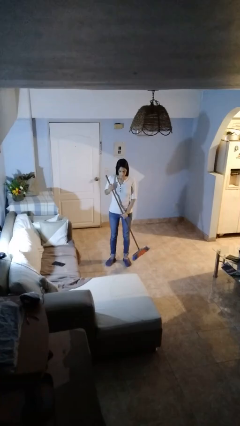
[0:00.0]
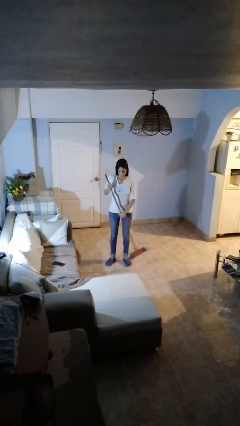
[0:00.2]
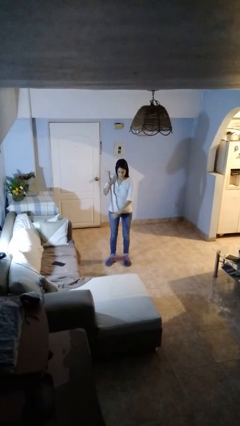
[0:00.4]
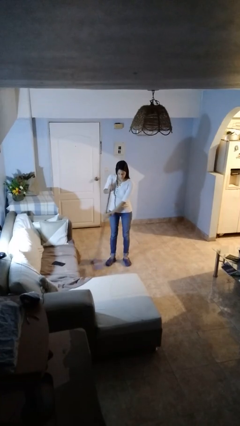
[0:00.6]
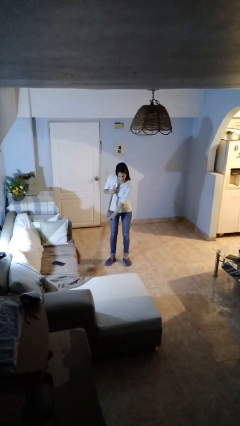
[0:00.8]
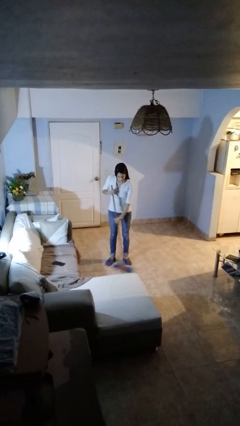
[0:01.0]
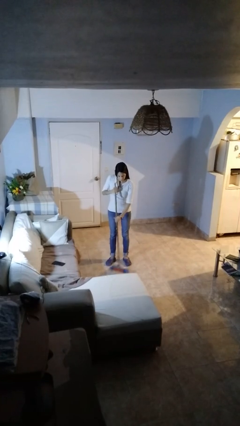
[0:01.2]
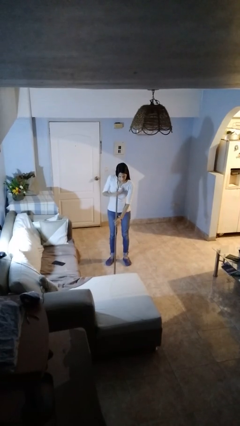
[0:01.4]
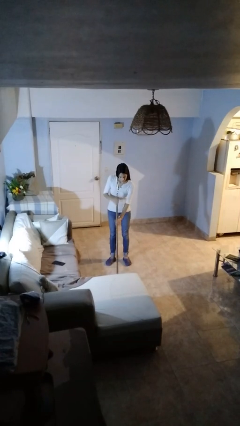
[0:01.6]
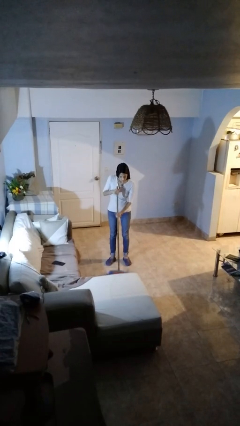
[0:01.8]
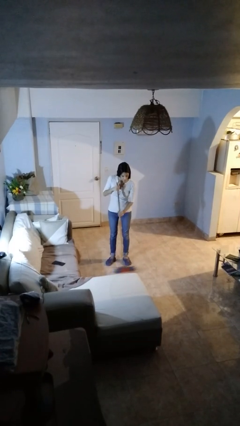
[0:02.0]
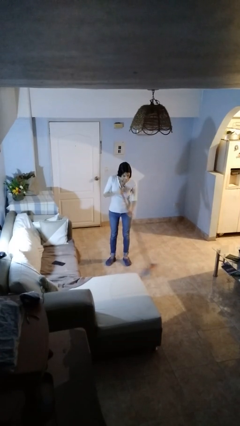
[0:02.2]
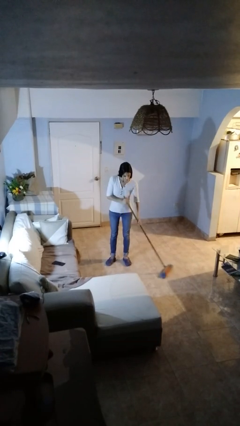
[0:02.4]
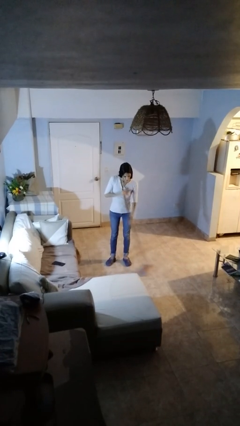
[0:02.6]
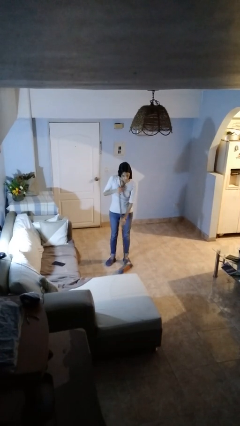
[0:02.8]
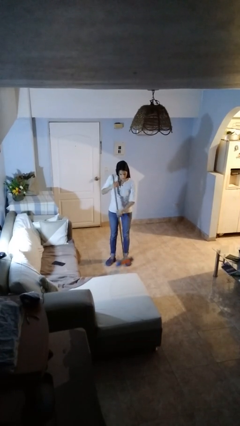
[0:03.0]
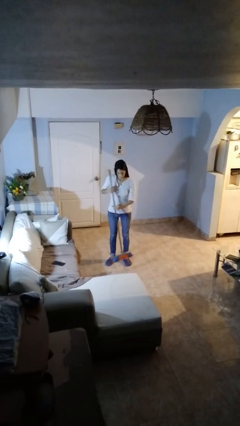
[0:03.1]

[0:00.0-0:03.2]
person sweeps floor

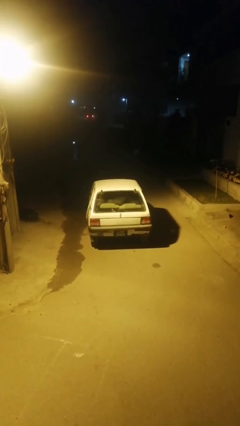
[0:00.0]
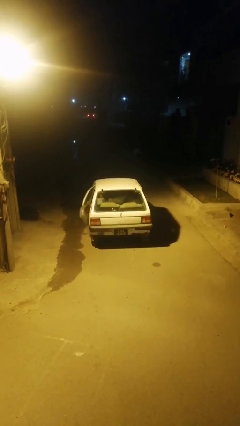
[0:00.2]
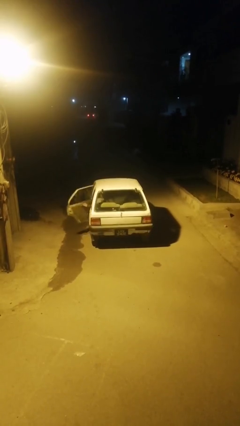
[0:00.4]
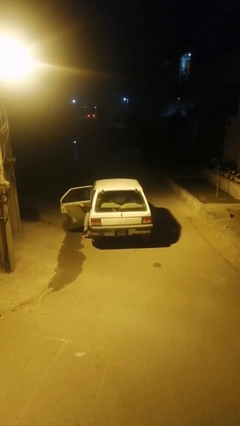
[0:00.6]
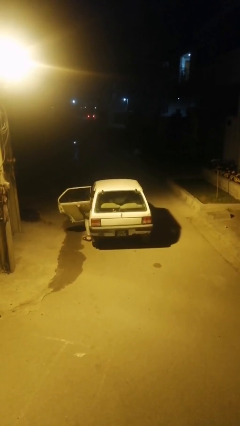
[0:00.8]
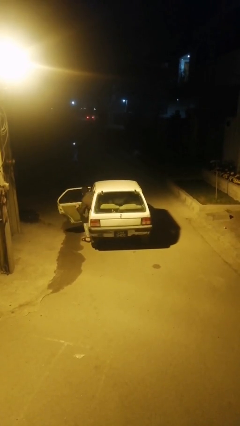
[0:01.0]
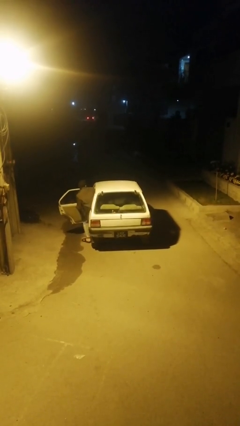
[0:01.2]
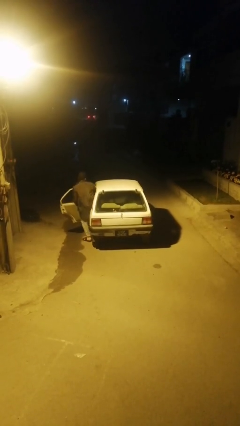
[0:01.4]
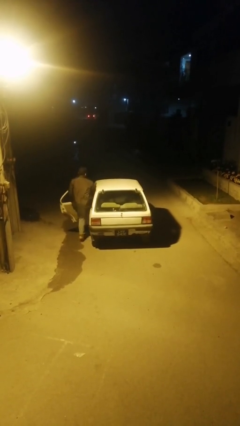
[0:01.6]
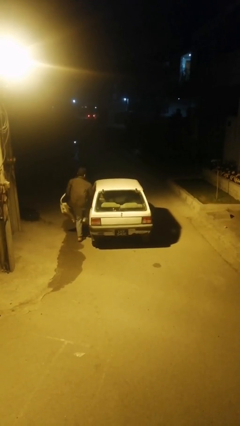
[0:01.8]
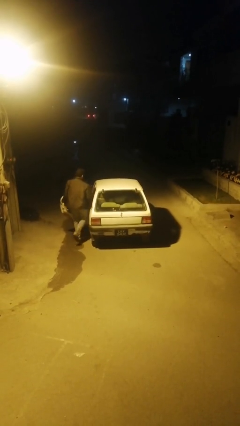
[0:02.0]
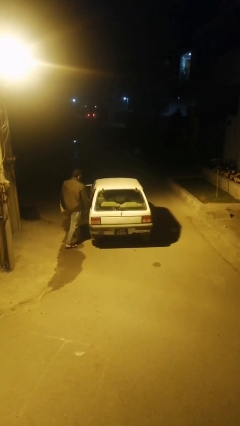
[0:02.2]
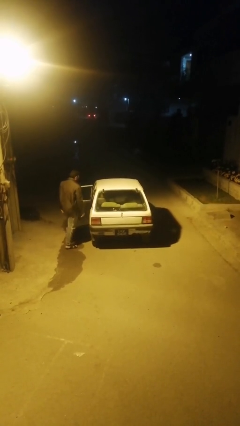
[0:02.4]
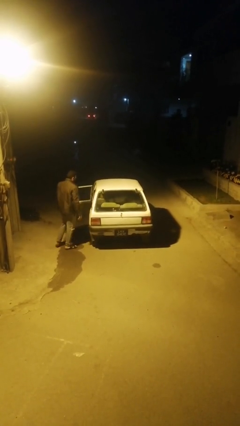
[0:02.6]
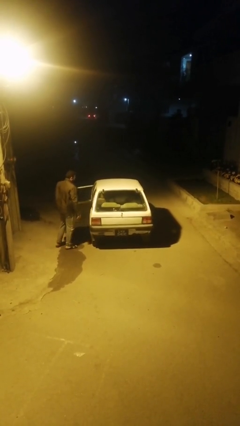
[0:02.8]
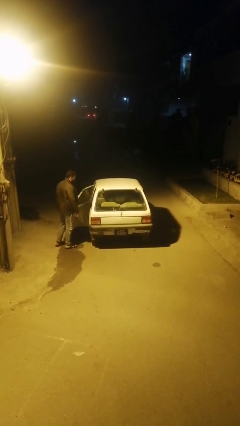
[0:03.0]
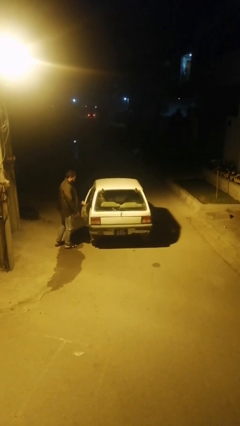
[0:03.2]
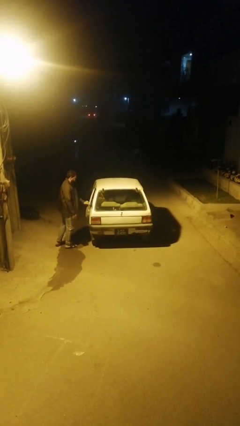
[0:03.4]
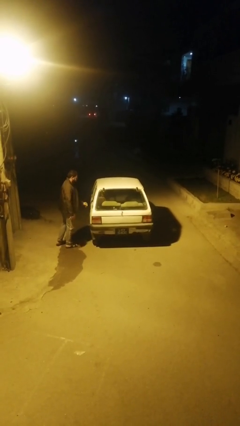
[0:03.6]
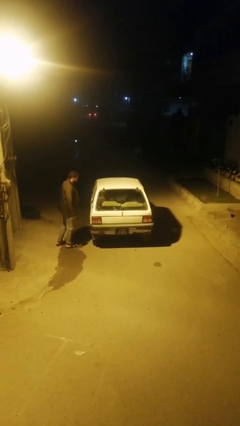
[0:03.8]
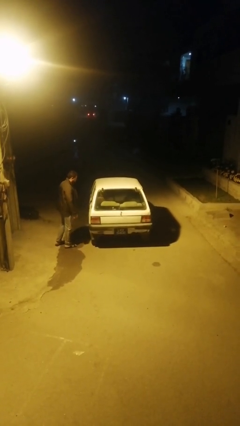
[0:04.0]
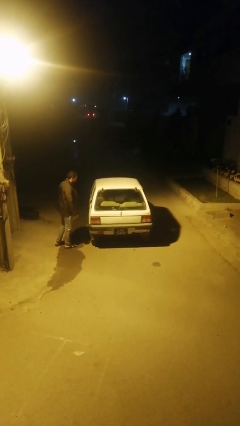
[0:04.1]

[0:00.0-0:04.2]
car drops off person

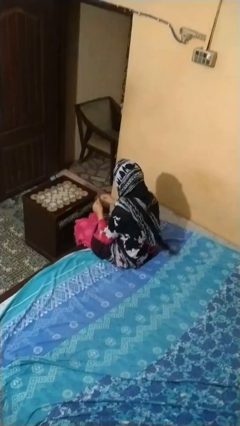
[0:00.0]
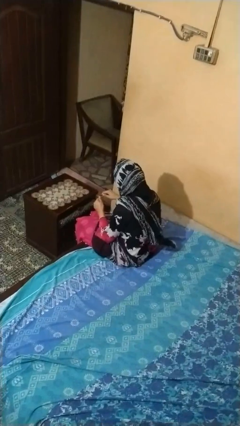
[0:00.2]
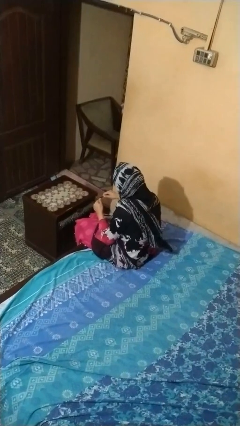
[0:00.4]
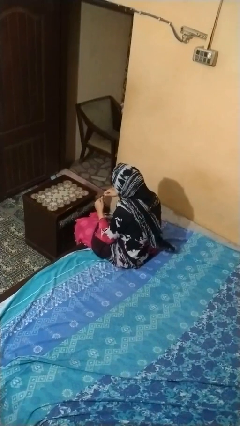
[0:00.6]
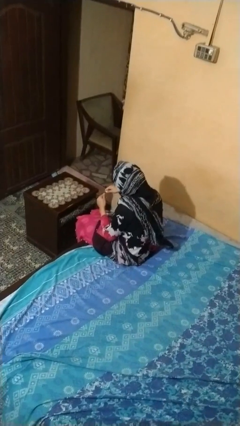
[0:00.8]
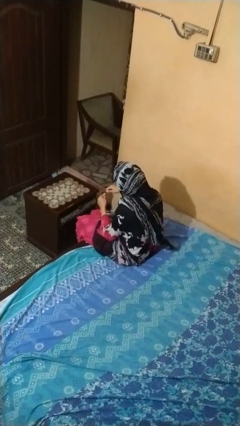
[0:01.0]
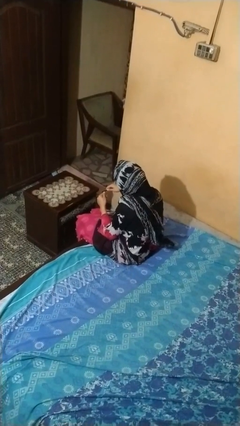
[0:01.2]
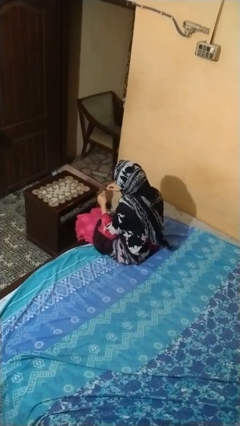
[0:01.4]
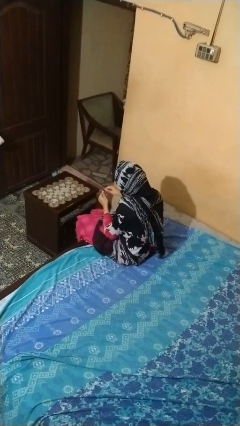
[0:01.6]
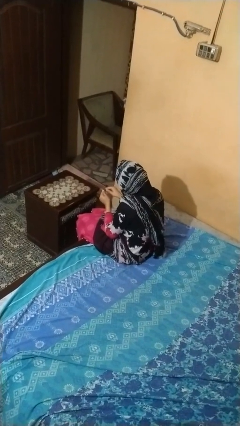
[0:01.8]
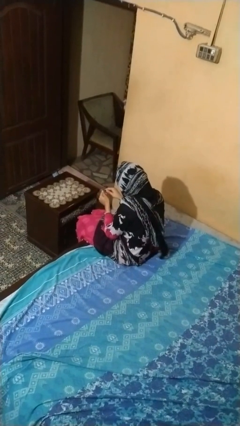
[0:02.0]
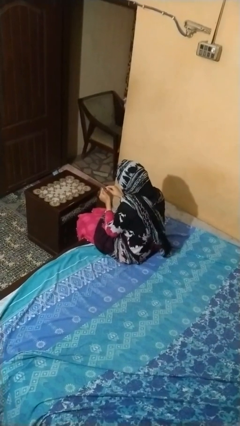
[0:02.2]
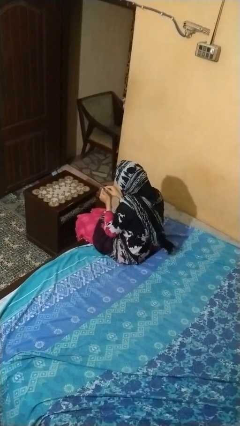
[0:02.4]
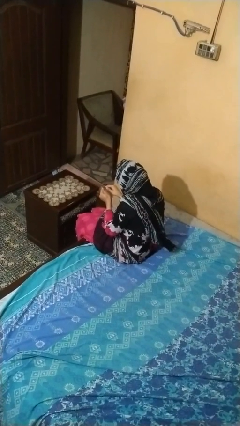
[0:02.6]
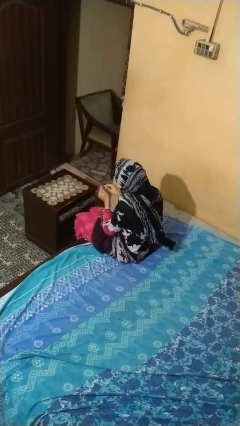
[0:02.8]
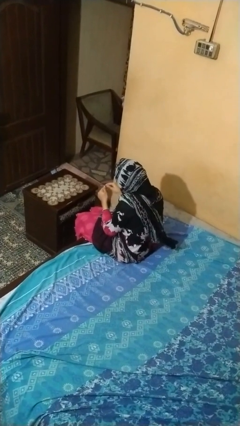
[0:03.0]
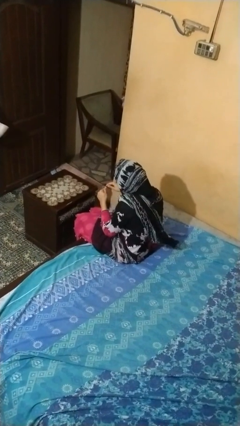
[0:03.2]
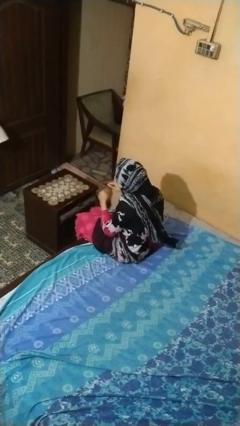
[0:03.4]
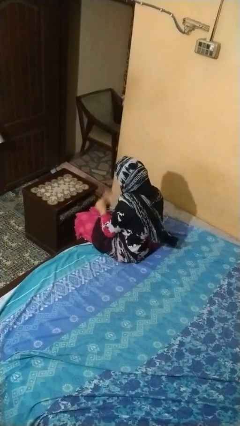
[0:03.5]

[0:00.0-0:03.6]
person files fingernails

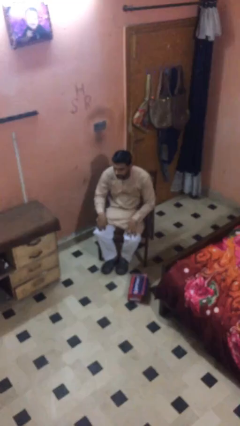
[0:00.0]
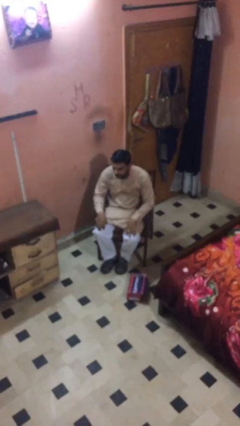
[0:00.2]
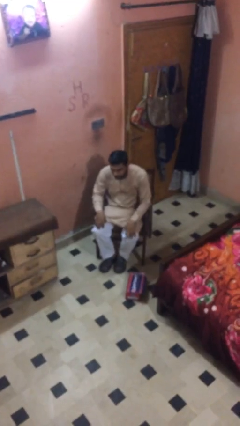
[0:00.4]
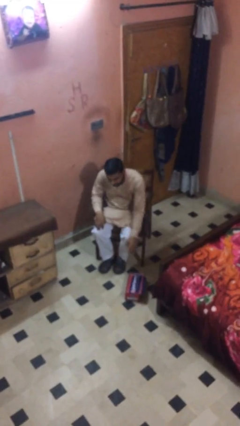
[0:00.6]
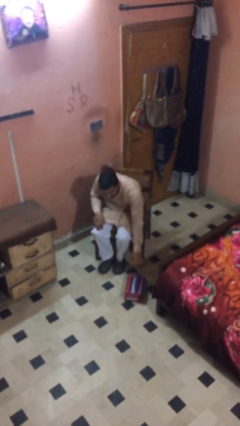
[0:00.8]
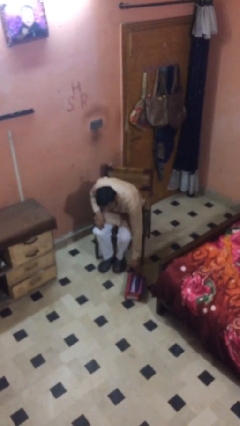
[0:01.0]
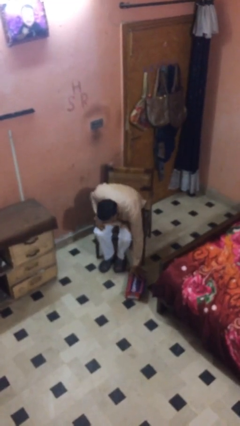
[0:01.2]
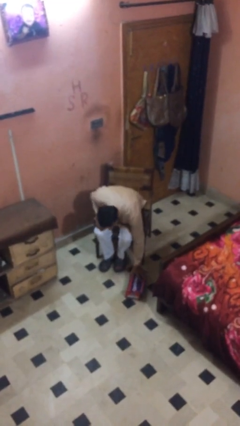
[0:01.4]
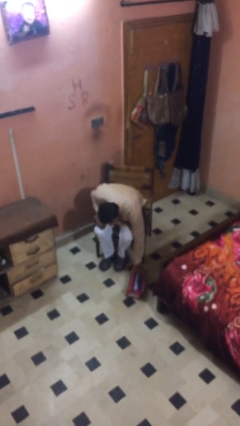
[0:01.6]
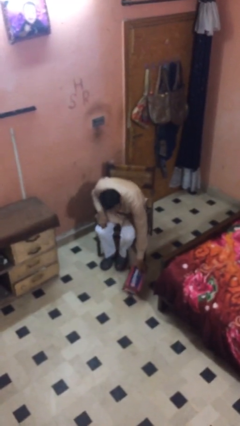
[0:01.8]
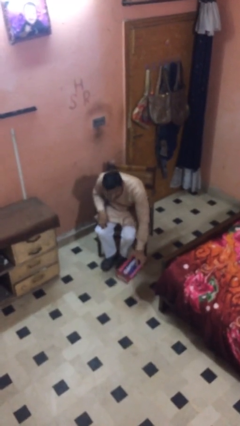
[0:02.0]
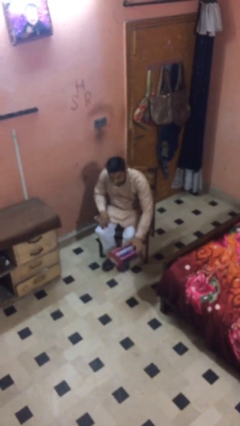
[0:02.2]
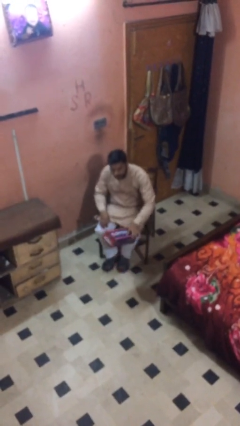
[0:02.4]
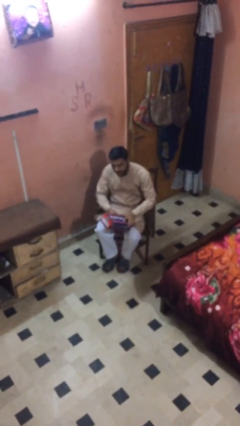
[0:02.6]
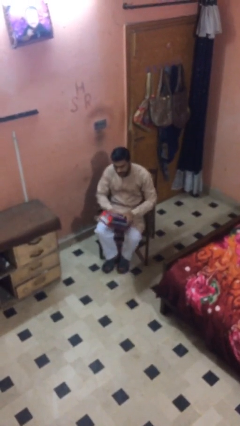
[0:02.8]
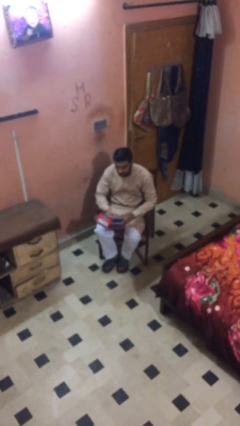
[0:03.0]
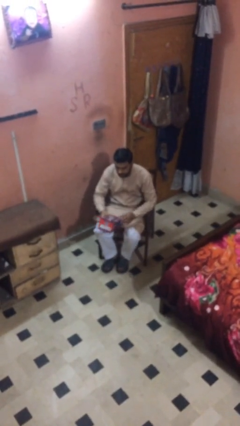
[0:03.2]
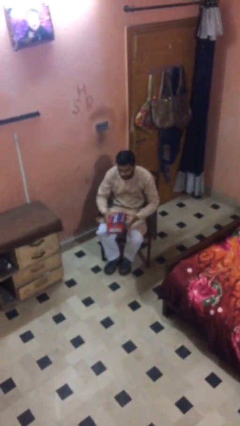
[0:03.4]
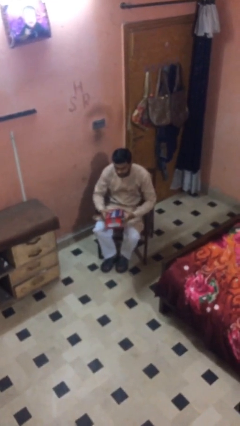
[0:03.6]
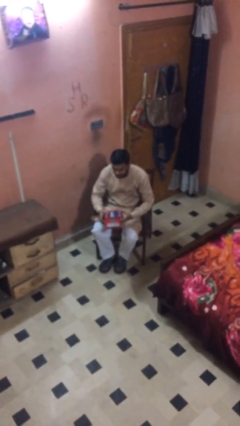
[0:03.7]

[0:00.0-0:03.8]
person picks up object from floor

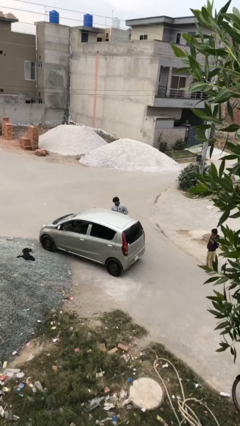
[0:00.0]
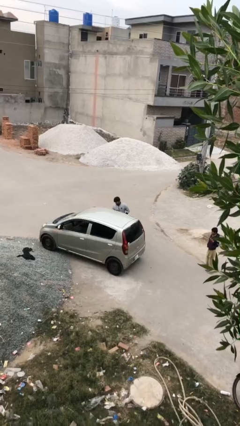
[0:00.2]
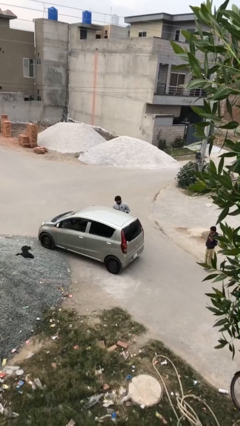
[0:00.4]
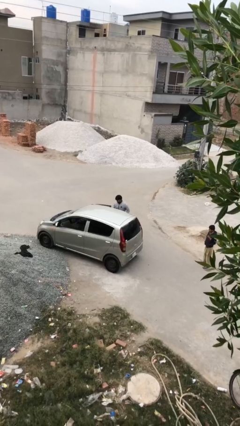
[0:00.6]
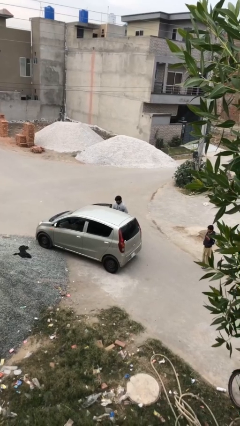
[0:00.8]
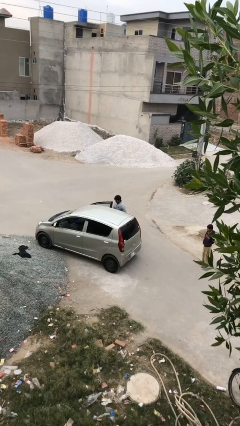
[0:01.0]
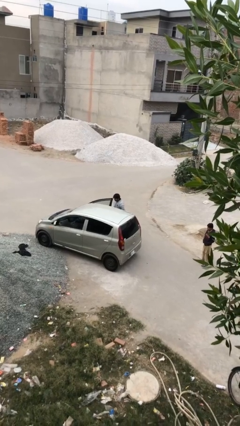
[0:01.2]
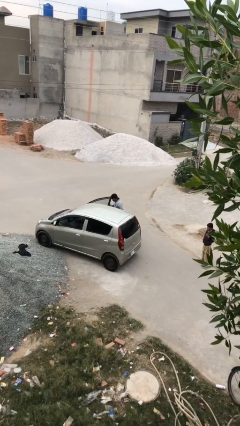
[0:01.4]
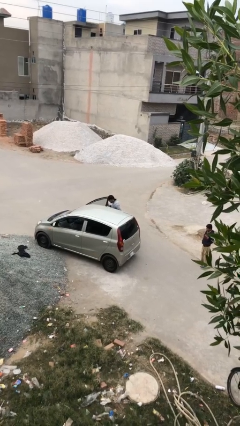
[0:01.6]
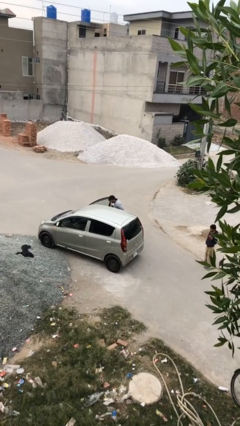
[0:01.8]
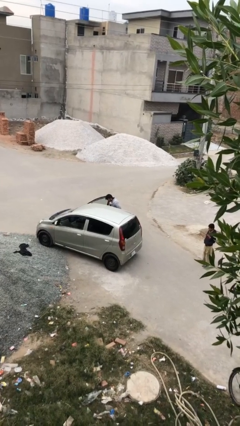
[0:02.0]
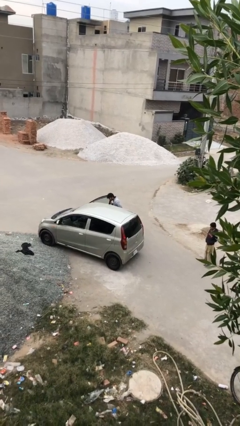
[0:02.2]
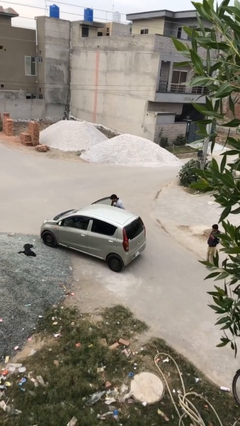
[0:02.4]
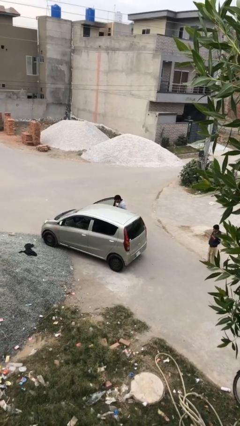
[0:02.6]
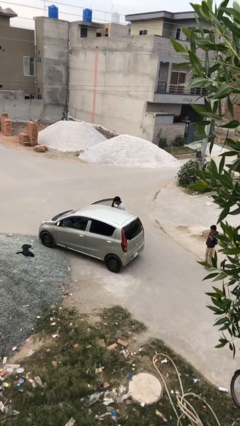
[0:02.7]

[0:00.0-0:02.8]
person opens car door

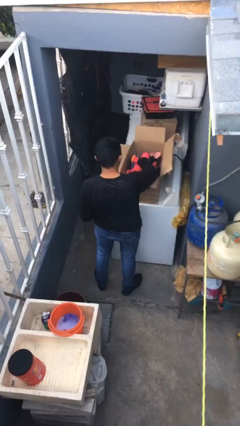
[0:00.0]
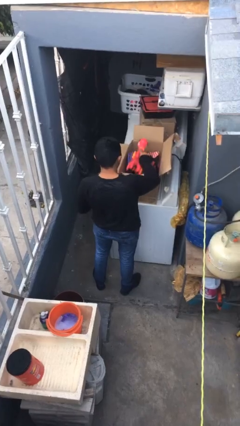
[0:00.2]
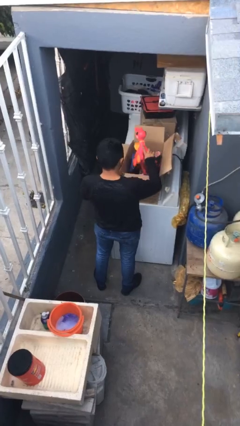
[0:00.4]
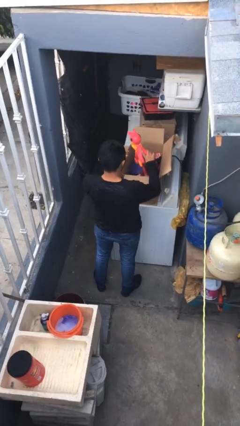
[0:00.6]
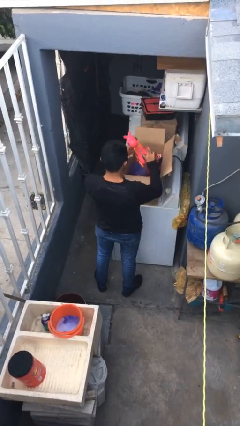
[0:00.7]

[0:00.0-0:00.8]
person takes object from box
